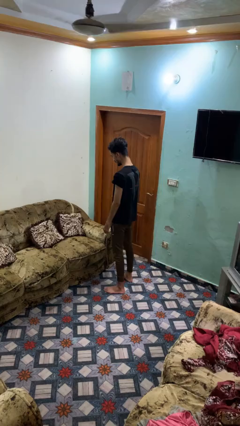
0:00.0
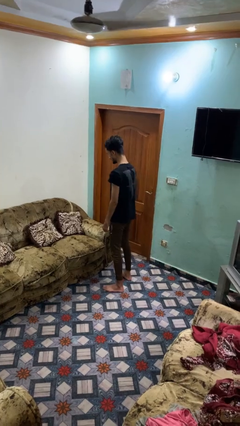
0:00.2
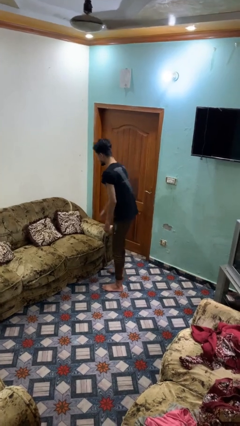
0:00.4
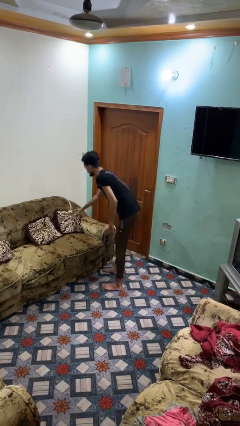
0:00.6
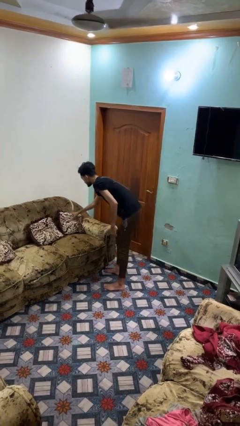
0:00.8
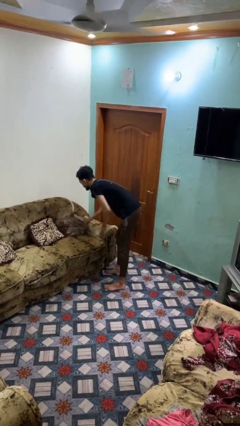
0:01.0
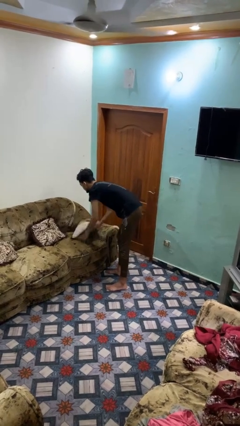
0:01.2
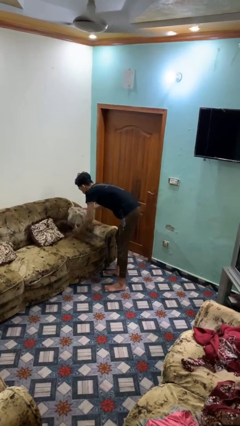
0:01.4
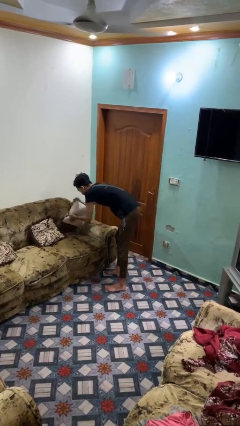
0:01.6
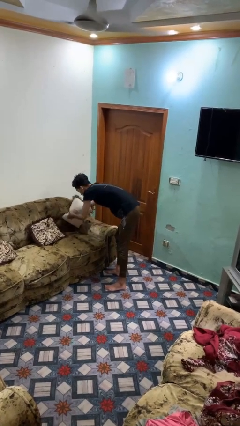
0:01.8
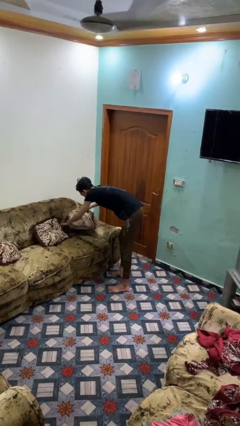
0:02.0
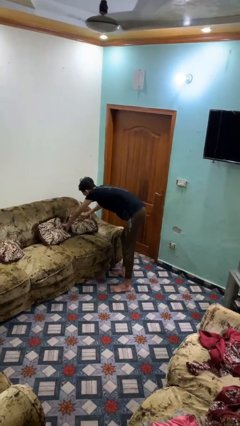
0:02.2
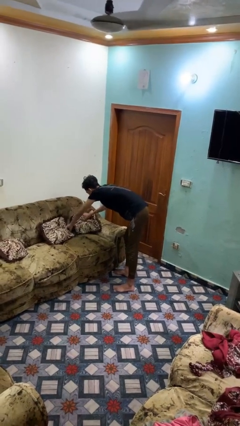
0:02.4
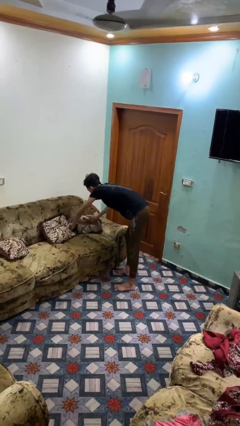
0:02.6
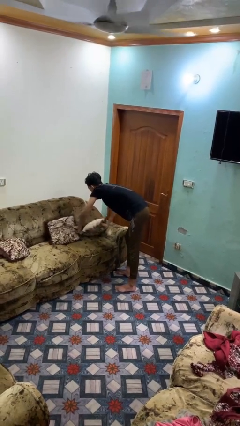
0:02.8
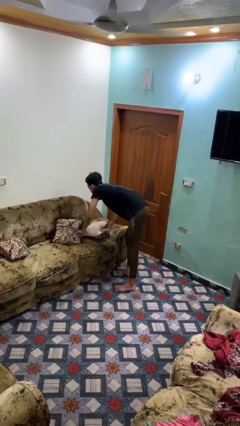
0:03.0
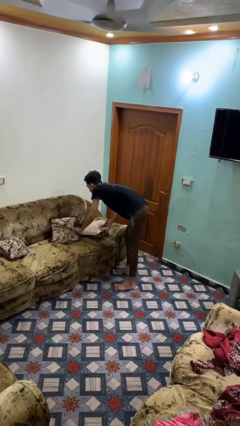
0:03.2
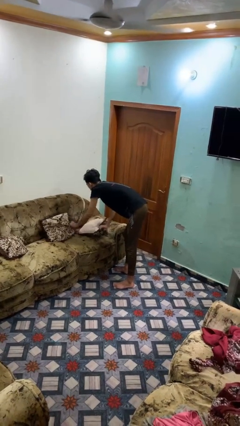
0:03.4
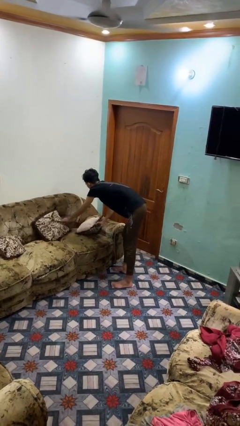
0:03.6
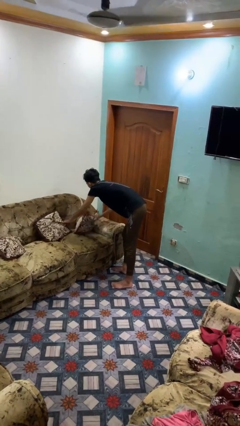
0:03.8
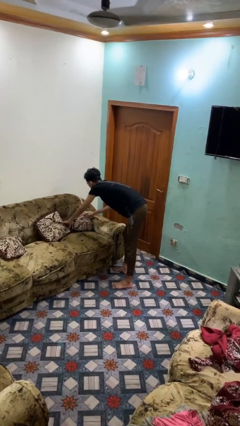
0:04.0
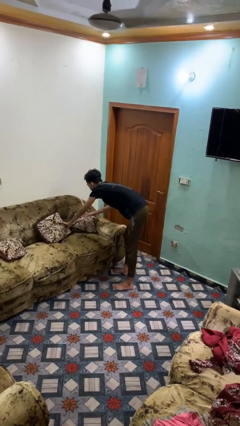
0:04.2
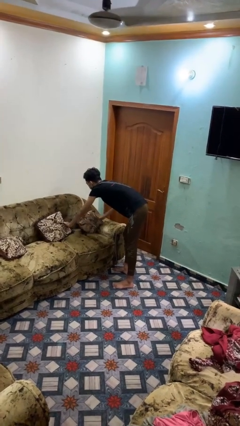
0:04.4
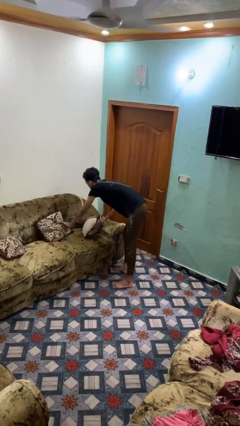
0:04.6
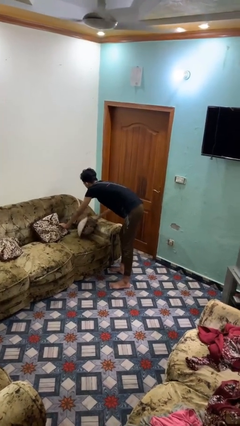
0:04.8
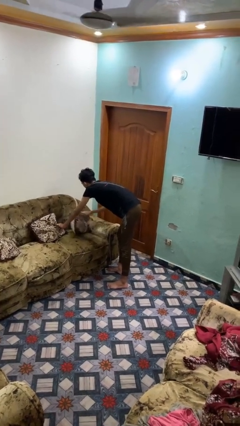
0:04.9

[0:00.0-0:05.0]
person searches under couch

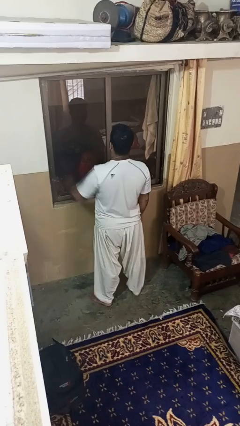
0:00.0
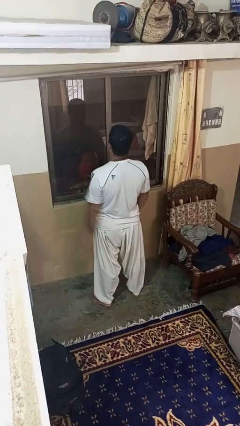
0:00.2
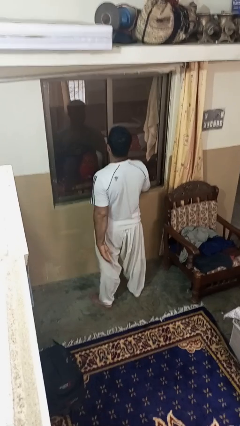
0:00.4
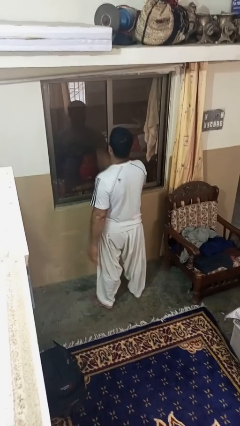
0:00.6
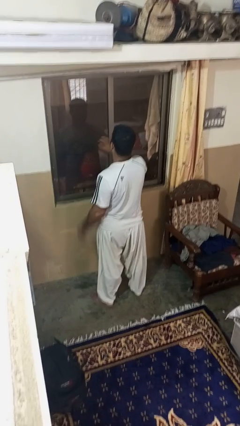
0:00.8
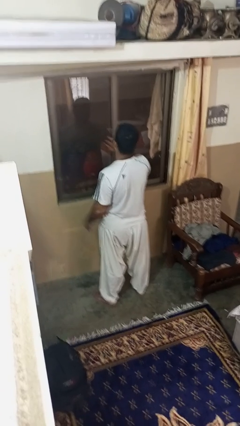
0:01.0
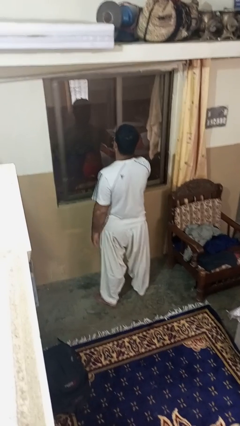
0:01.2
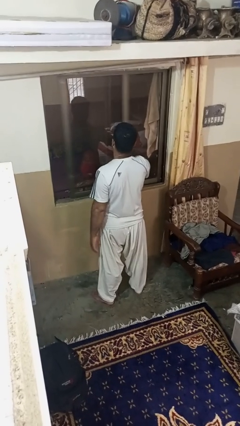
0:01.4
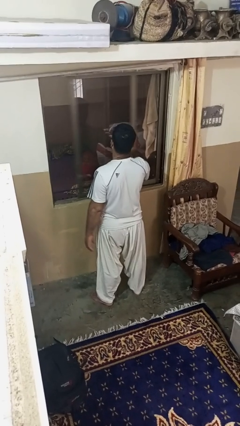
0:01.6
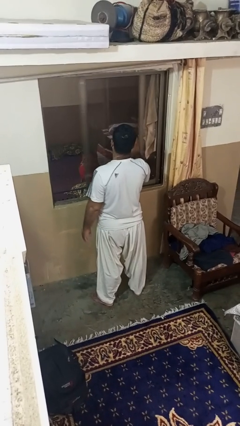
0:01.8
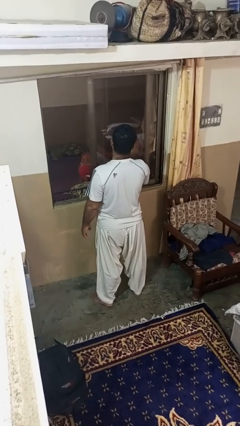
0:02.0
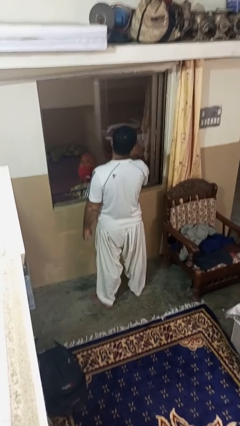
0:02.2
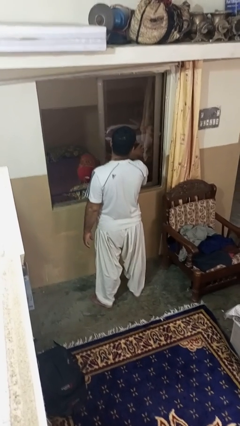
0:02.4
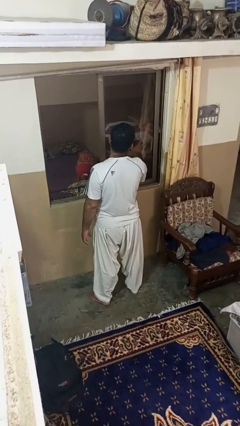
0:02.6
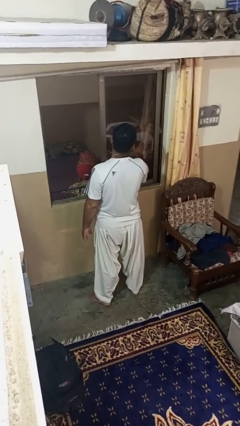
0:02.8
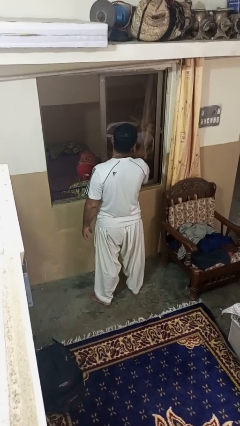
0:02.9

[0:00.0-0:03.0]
person opens home window

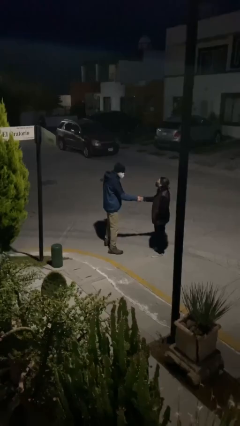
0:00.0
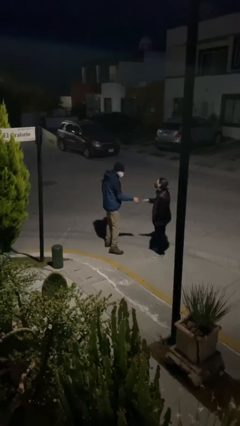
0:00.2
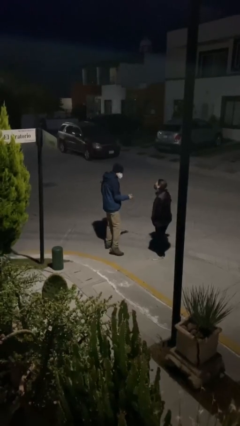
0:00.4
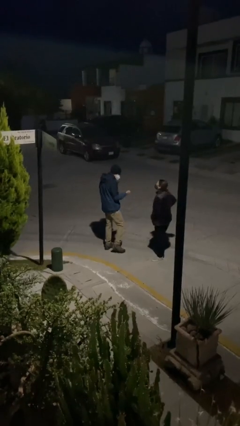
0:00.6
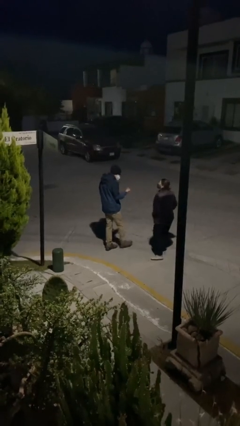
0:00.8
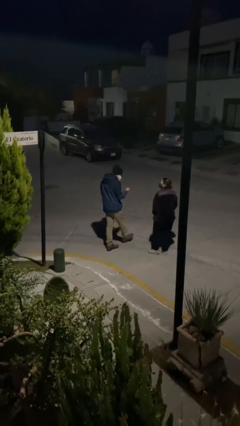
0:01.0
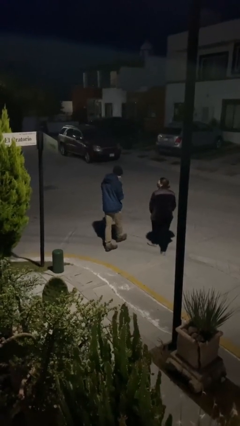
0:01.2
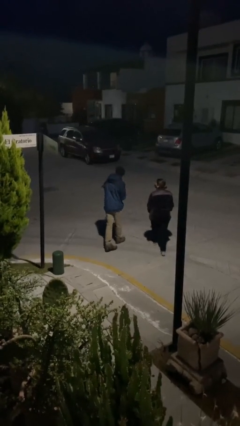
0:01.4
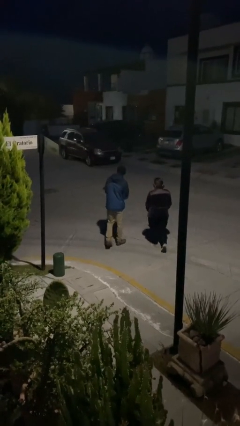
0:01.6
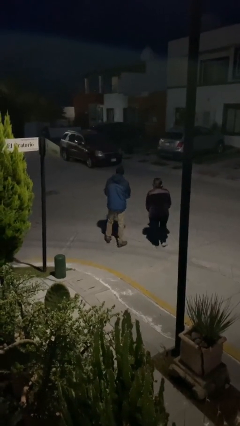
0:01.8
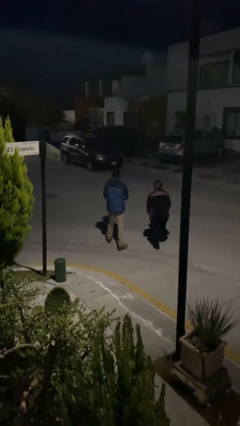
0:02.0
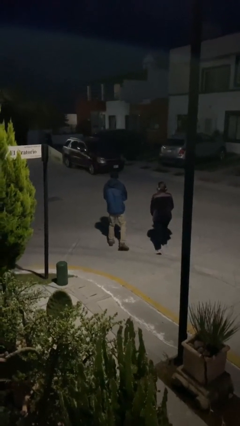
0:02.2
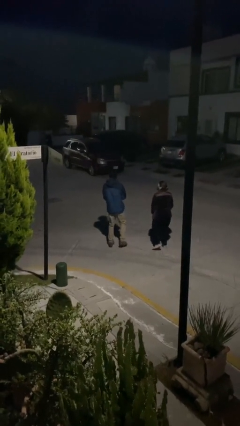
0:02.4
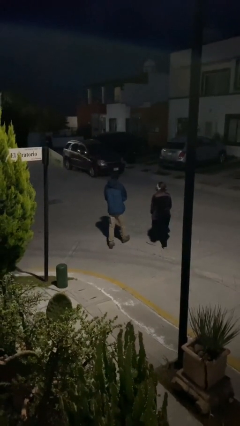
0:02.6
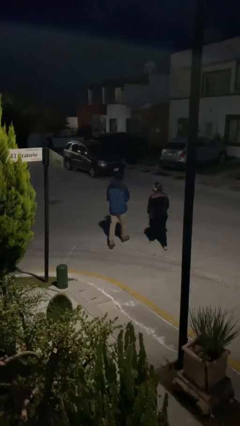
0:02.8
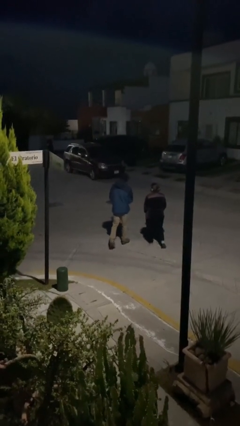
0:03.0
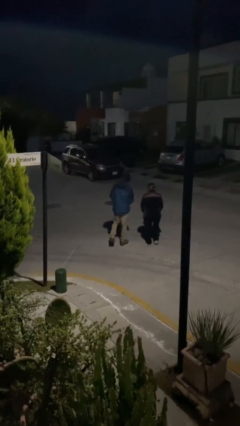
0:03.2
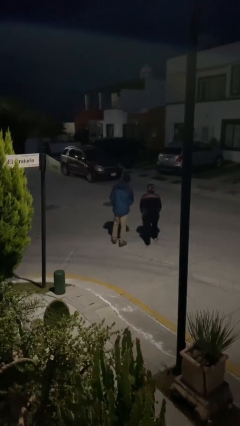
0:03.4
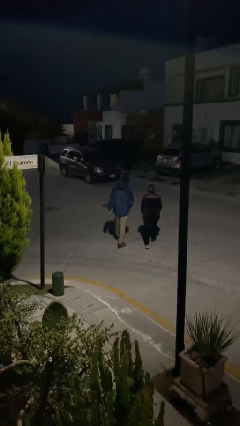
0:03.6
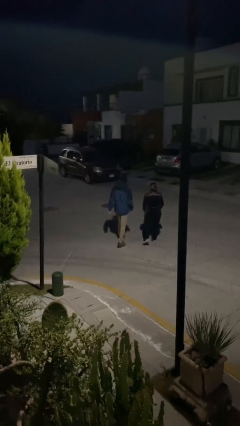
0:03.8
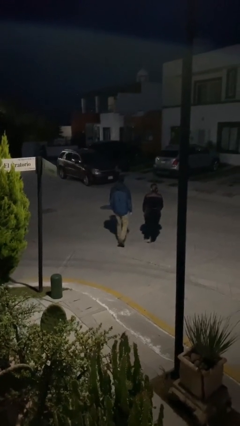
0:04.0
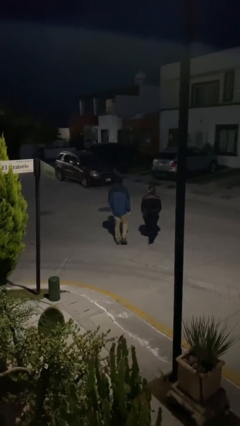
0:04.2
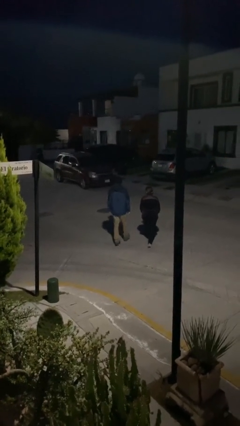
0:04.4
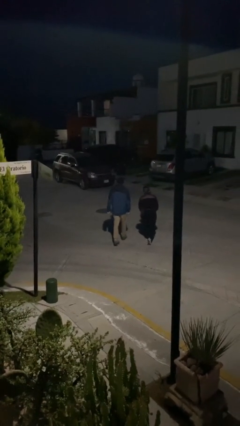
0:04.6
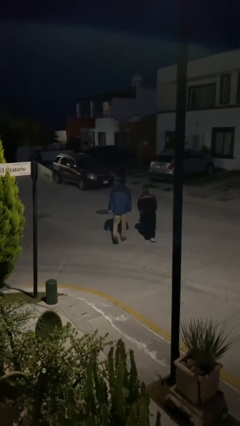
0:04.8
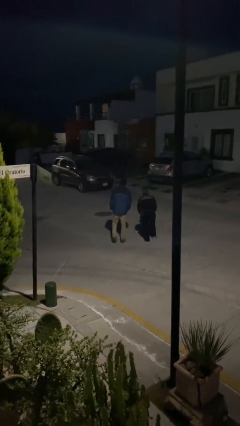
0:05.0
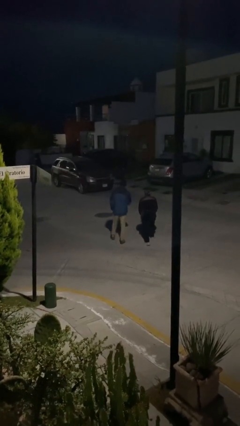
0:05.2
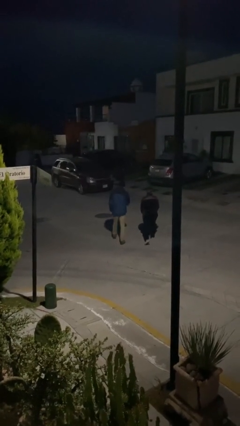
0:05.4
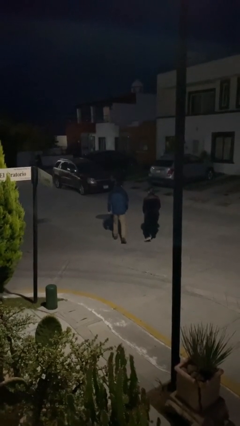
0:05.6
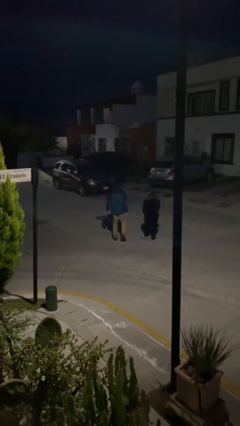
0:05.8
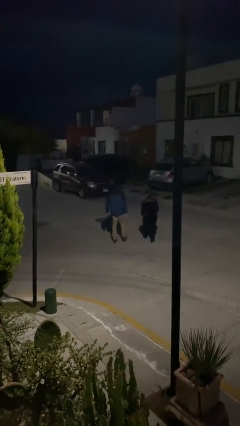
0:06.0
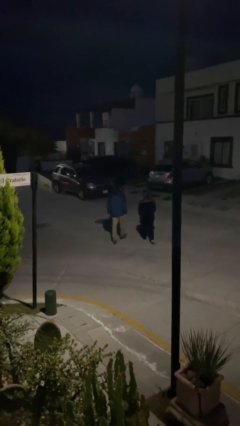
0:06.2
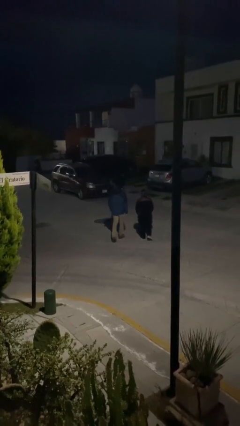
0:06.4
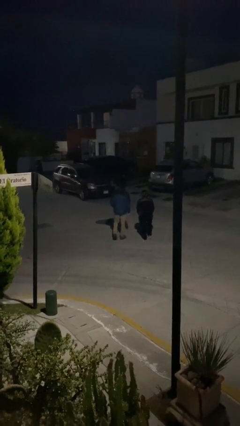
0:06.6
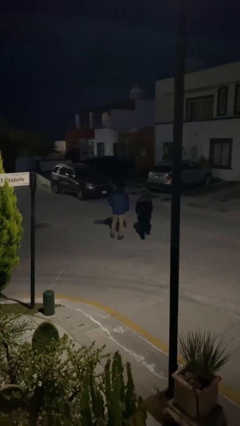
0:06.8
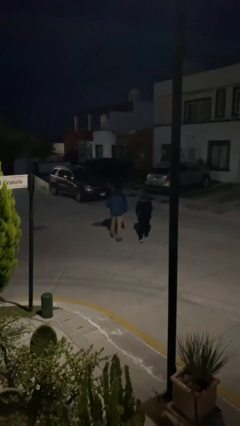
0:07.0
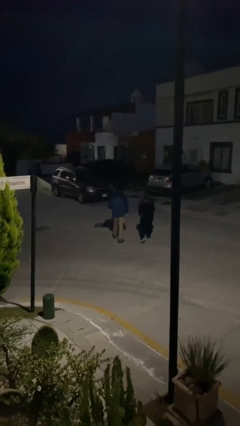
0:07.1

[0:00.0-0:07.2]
person talks to person

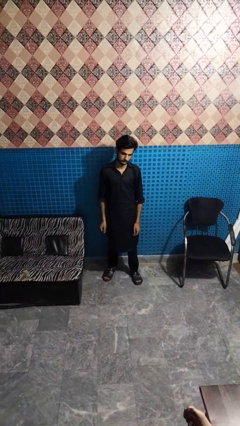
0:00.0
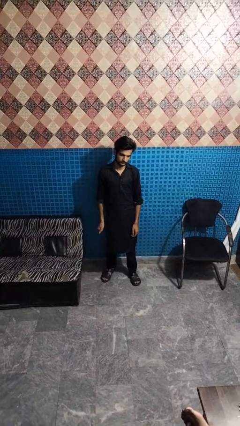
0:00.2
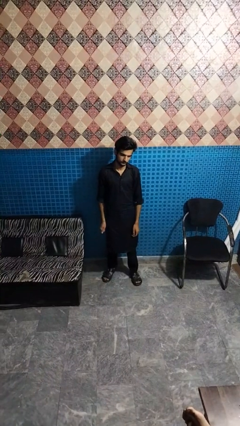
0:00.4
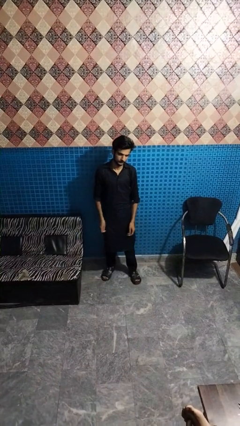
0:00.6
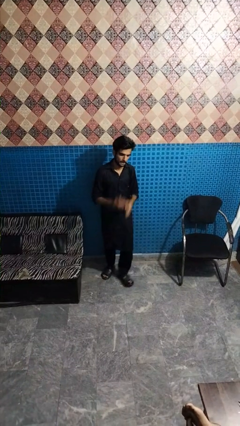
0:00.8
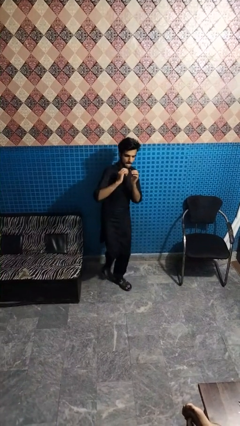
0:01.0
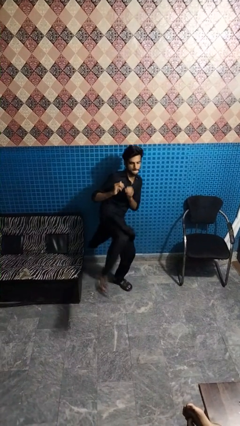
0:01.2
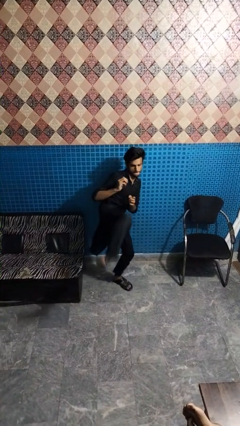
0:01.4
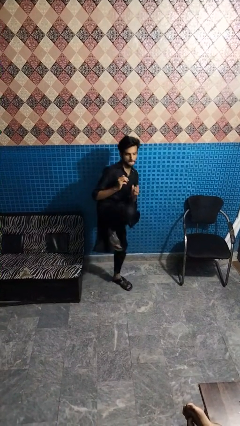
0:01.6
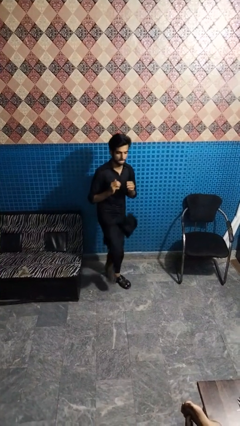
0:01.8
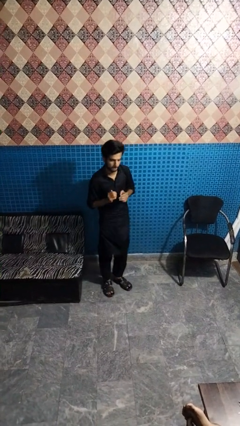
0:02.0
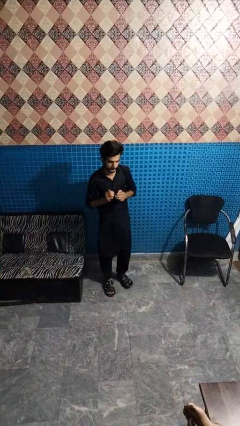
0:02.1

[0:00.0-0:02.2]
person karate kicks
